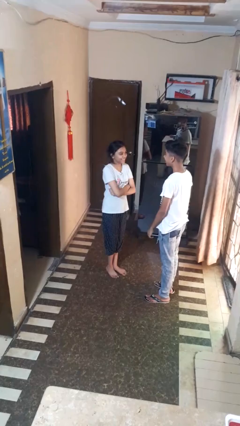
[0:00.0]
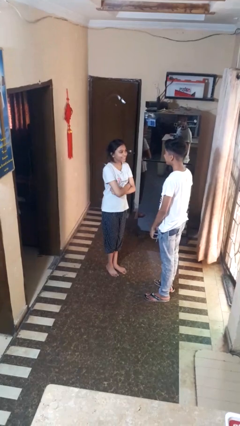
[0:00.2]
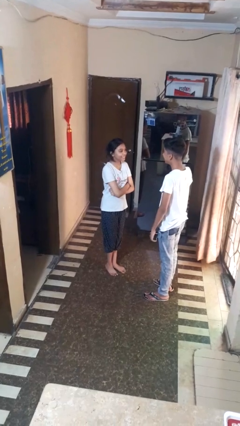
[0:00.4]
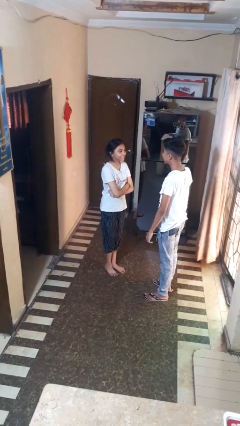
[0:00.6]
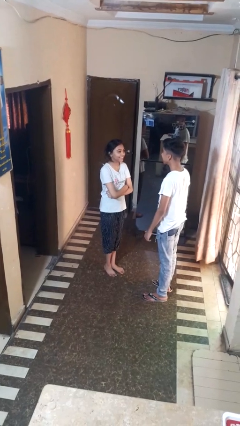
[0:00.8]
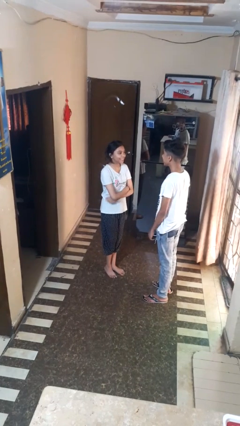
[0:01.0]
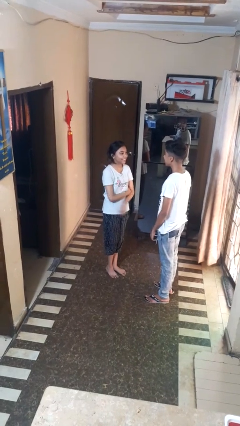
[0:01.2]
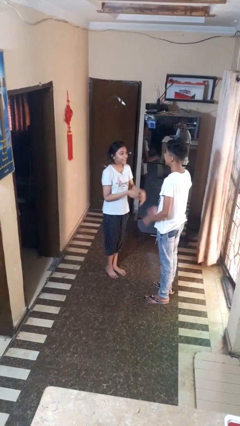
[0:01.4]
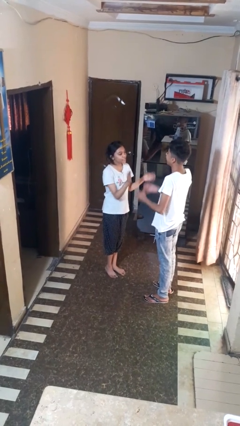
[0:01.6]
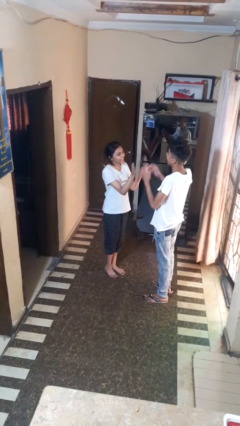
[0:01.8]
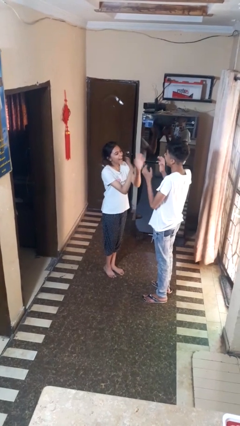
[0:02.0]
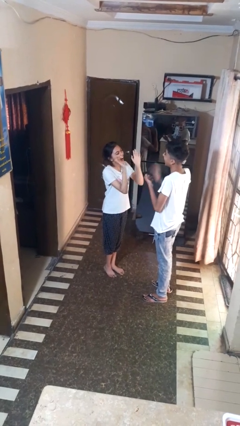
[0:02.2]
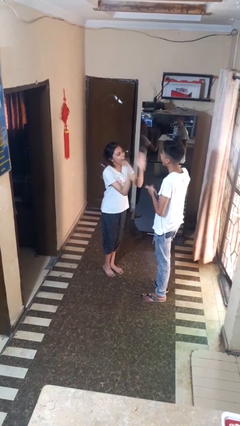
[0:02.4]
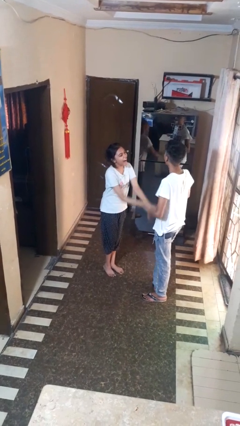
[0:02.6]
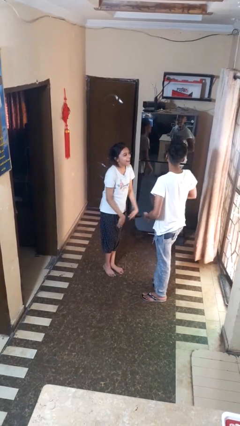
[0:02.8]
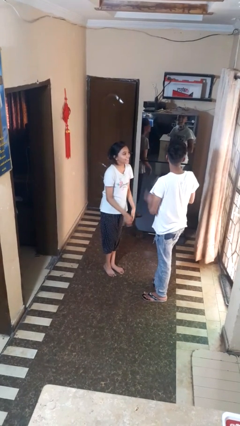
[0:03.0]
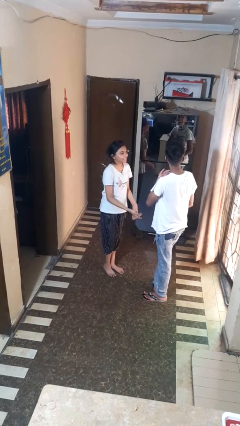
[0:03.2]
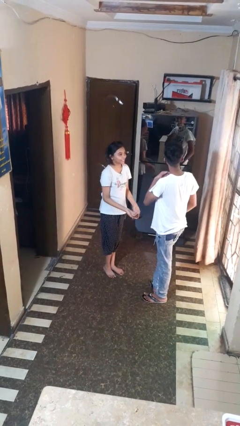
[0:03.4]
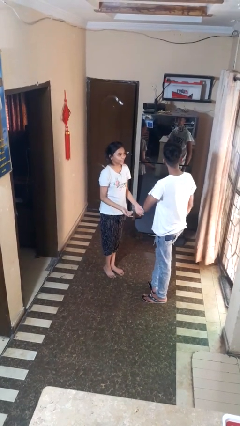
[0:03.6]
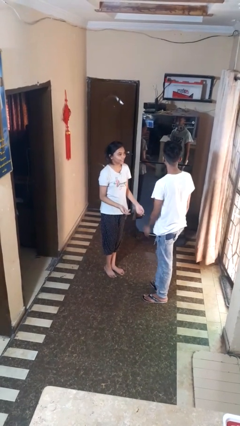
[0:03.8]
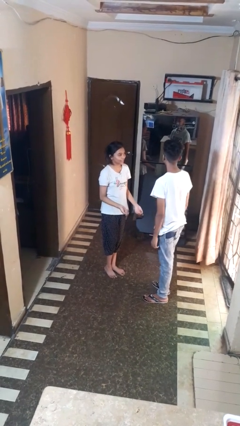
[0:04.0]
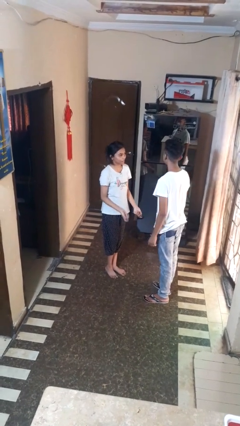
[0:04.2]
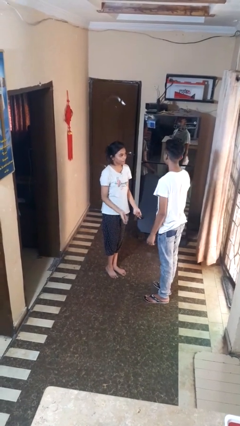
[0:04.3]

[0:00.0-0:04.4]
person laughs with person

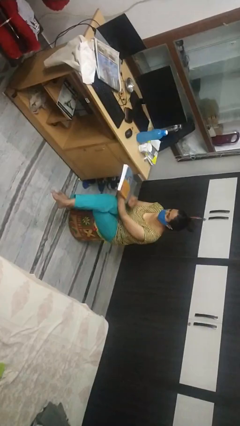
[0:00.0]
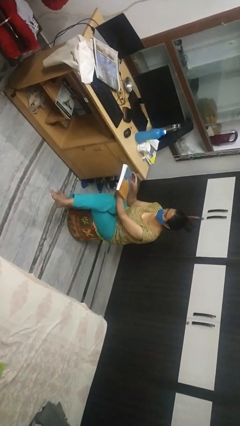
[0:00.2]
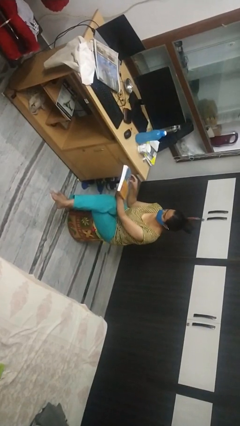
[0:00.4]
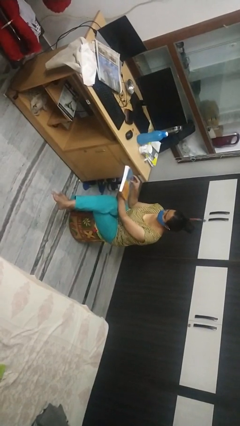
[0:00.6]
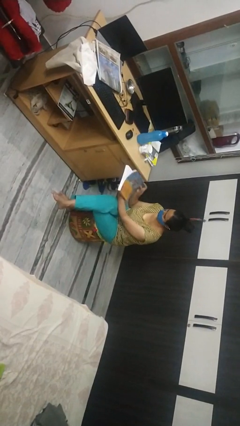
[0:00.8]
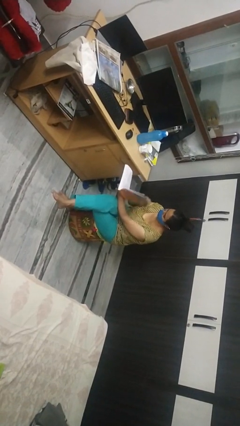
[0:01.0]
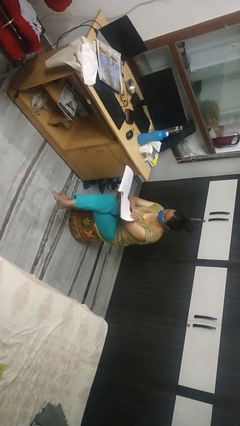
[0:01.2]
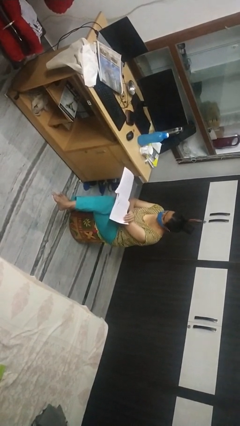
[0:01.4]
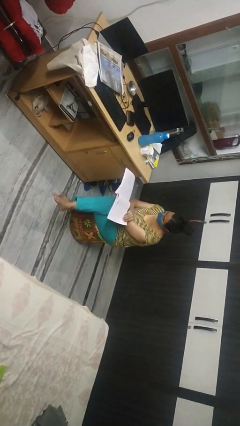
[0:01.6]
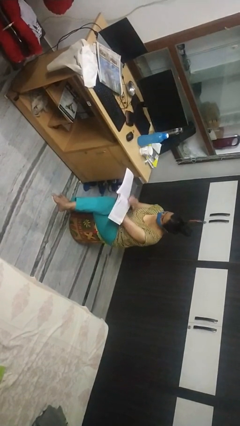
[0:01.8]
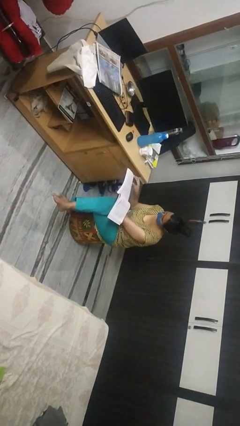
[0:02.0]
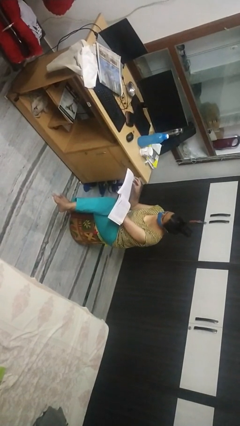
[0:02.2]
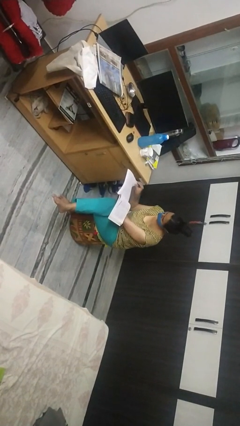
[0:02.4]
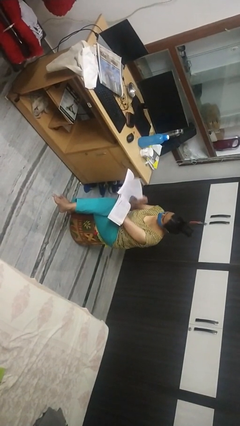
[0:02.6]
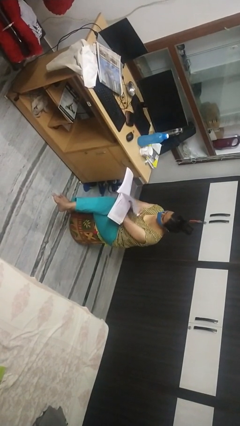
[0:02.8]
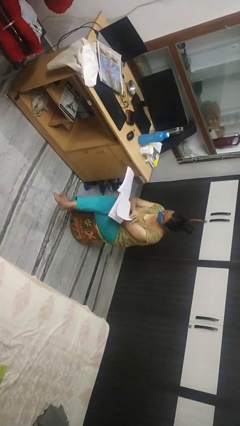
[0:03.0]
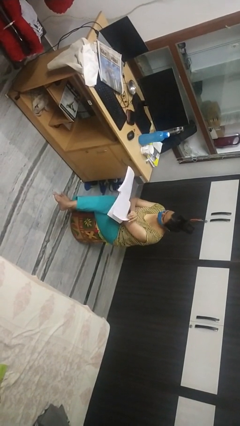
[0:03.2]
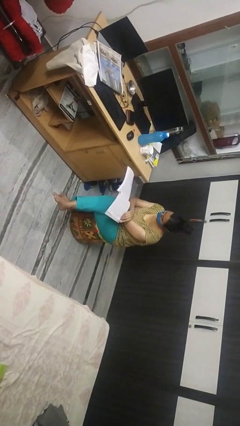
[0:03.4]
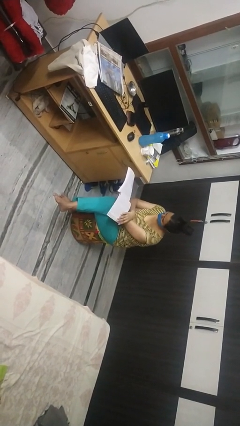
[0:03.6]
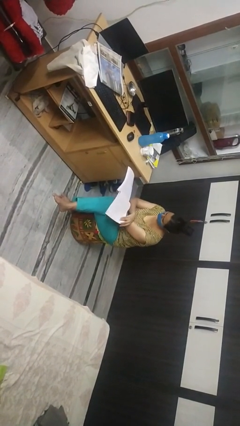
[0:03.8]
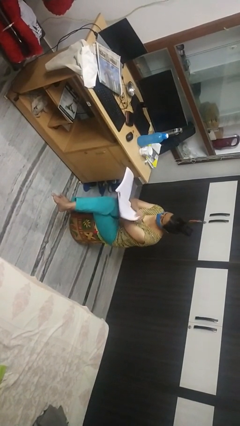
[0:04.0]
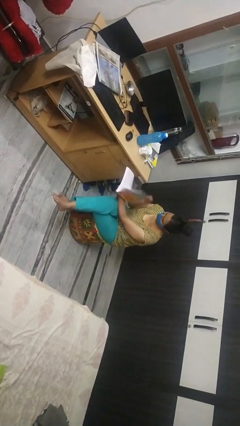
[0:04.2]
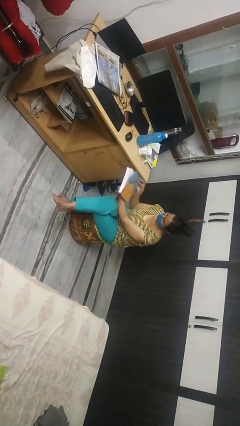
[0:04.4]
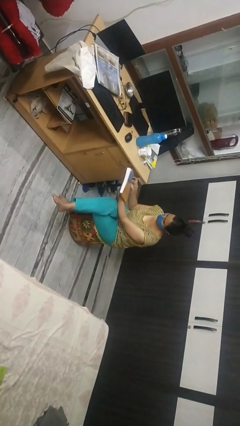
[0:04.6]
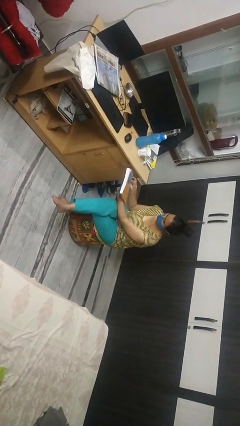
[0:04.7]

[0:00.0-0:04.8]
person reads book

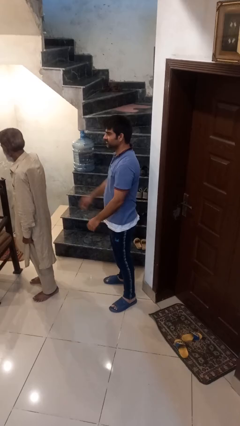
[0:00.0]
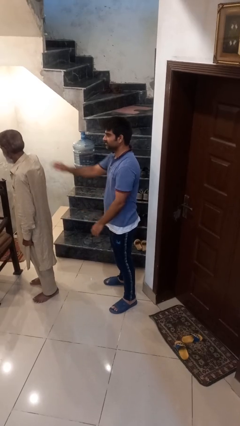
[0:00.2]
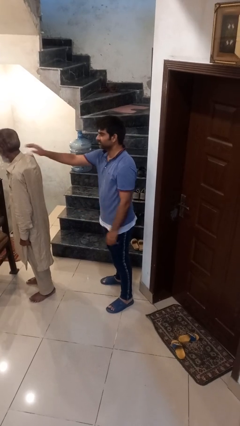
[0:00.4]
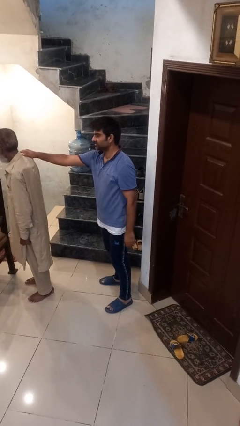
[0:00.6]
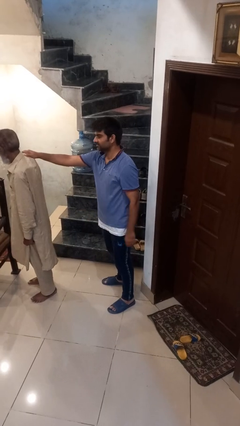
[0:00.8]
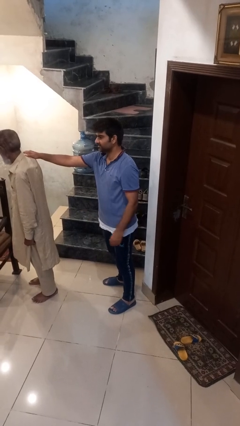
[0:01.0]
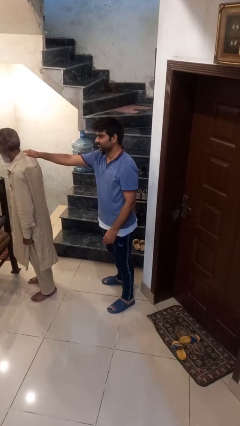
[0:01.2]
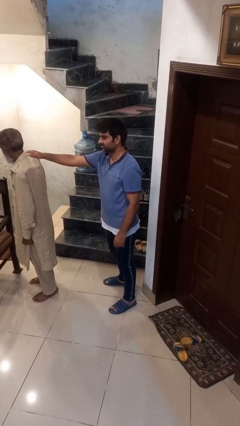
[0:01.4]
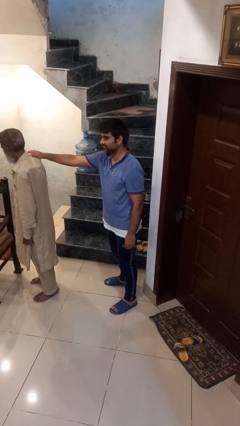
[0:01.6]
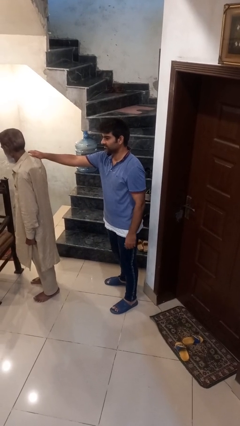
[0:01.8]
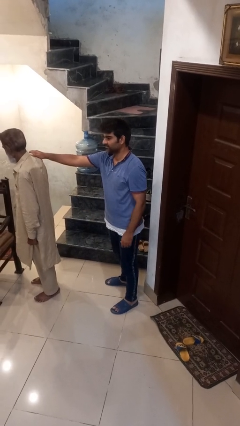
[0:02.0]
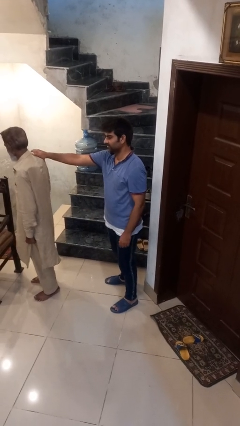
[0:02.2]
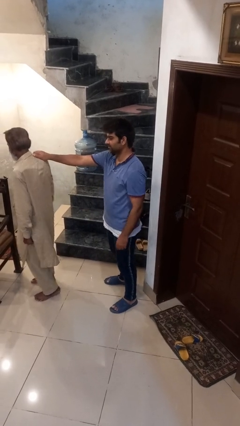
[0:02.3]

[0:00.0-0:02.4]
person grabs person by shoulder

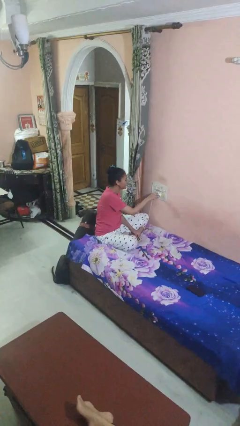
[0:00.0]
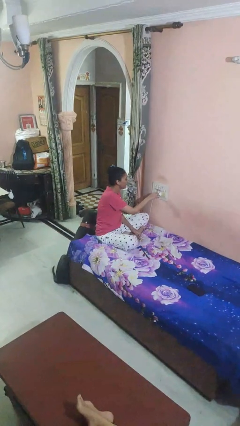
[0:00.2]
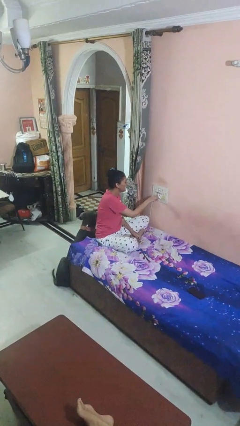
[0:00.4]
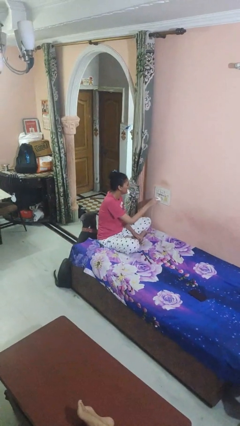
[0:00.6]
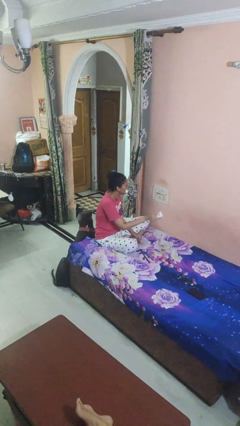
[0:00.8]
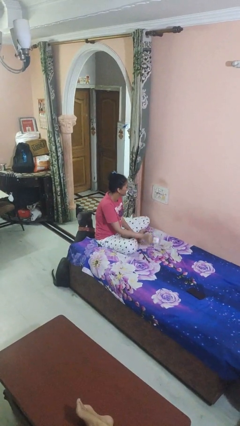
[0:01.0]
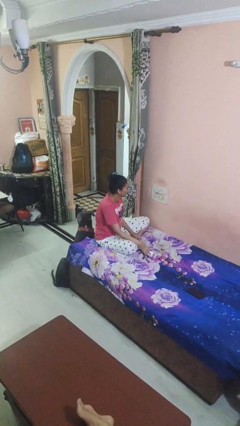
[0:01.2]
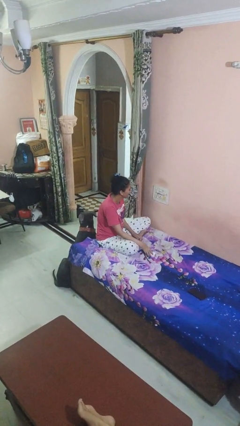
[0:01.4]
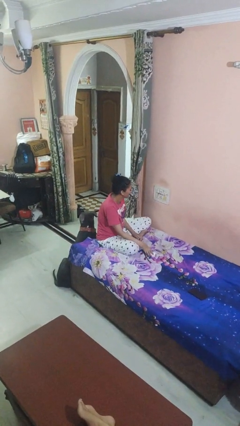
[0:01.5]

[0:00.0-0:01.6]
person unplugs from electrical socket

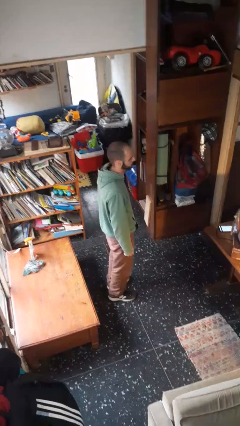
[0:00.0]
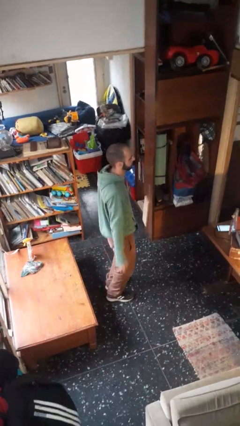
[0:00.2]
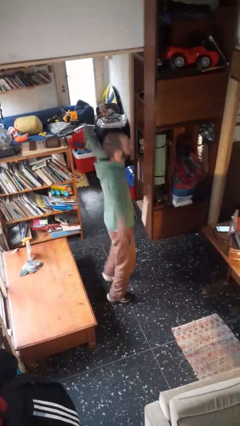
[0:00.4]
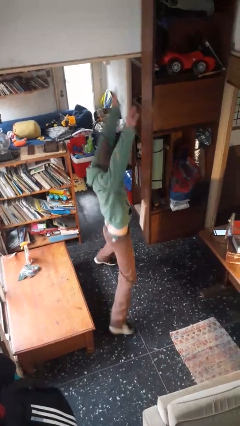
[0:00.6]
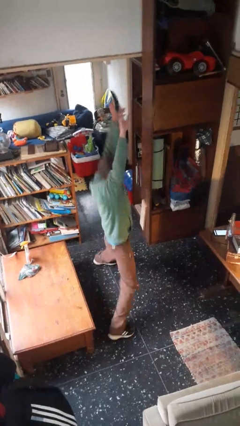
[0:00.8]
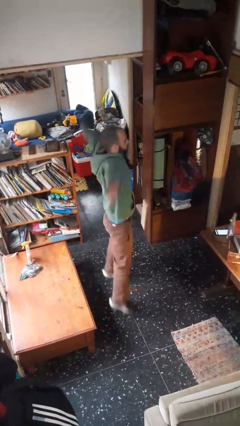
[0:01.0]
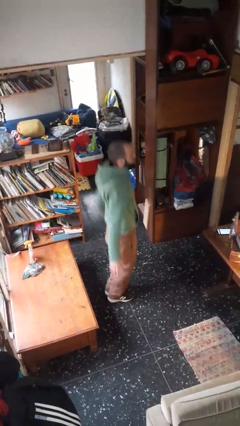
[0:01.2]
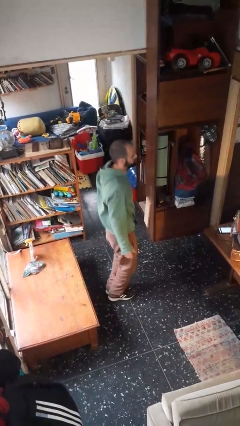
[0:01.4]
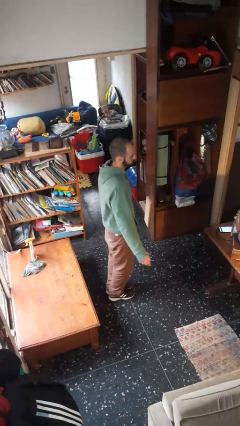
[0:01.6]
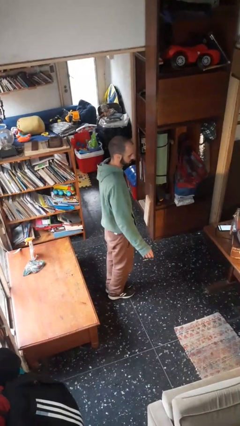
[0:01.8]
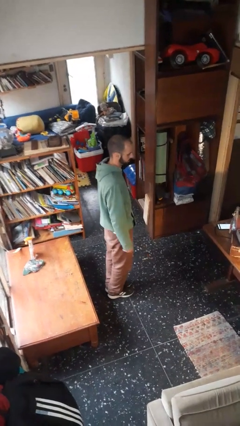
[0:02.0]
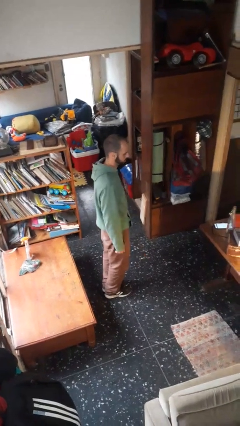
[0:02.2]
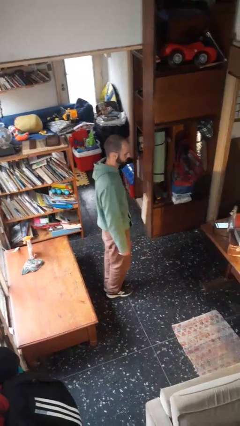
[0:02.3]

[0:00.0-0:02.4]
person exercises with jumping jacks

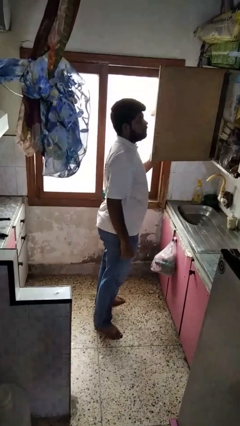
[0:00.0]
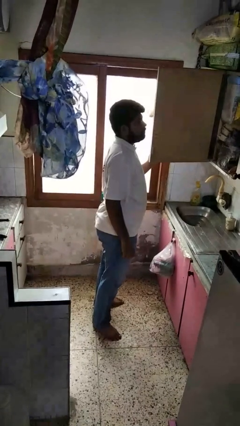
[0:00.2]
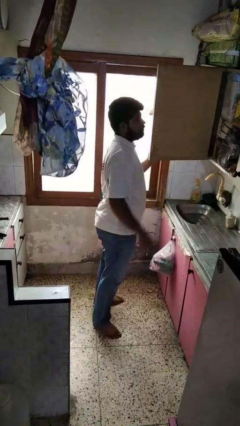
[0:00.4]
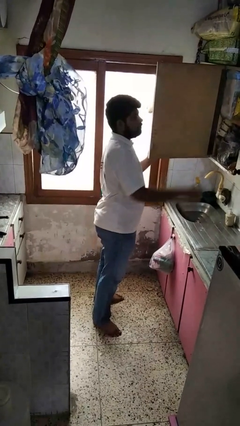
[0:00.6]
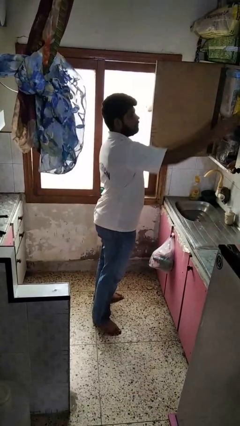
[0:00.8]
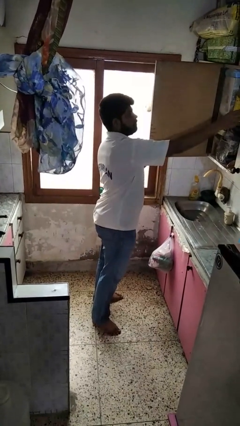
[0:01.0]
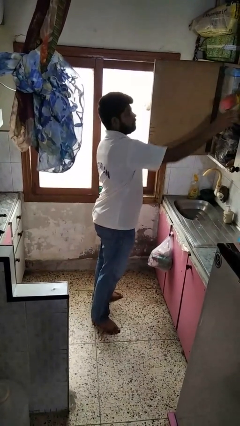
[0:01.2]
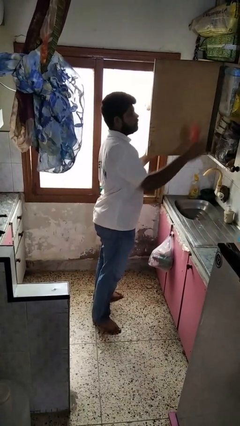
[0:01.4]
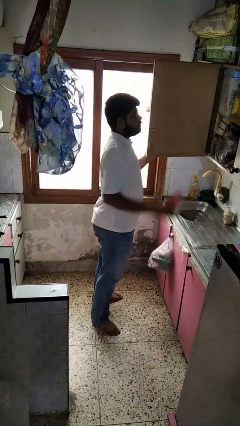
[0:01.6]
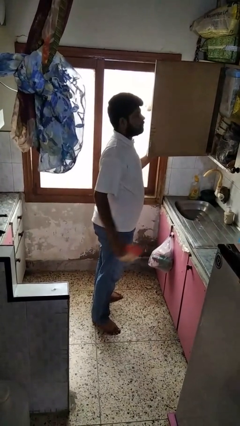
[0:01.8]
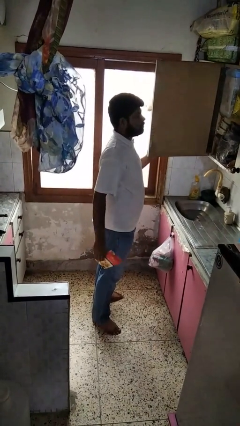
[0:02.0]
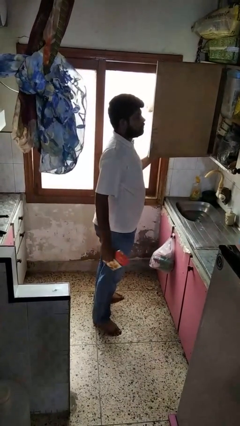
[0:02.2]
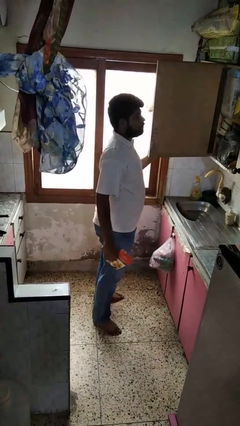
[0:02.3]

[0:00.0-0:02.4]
person picks up object from cabinet
